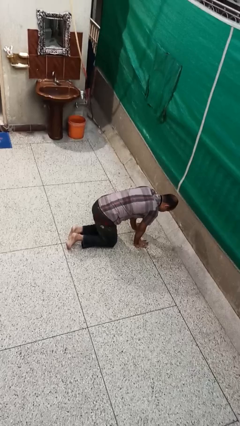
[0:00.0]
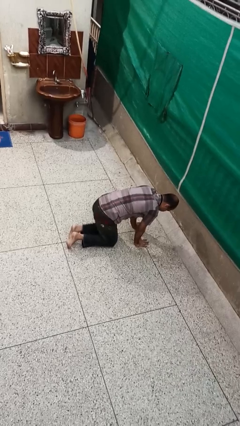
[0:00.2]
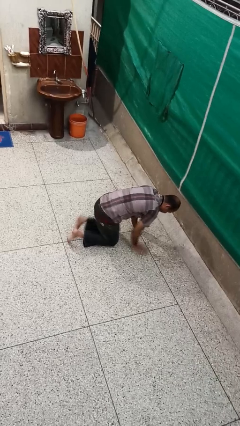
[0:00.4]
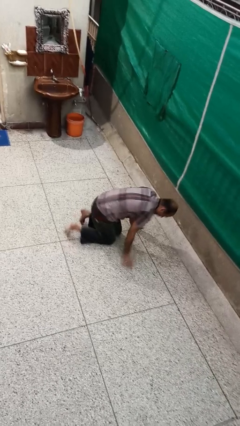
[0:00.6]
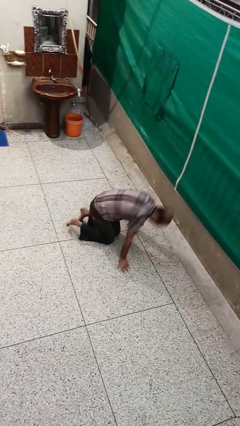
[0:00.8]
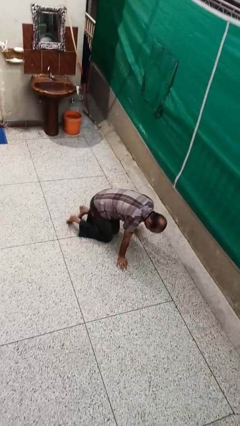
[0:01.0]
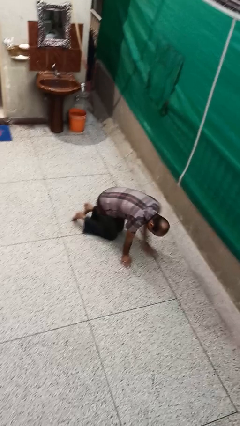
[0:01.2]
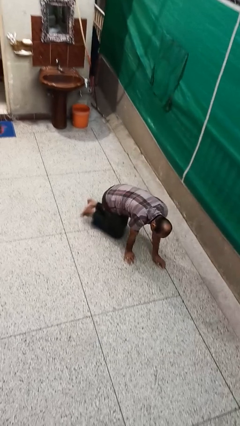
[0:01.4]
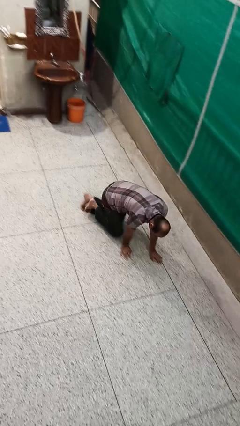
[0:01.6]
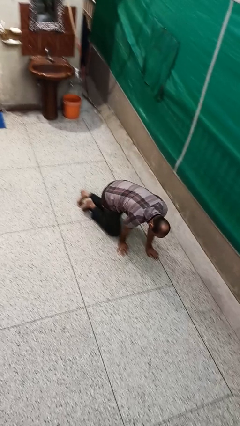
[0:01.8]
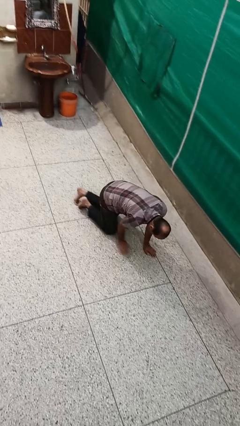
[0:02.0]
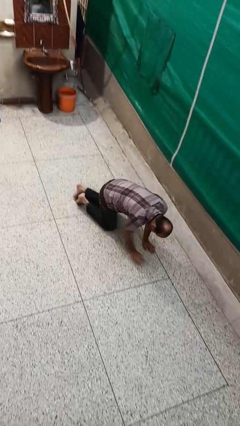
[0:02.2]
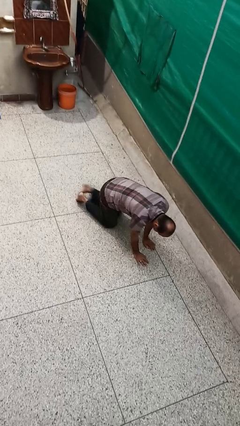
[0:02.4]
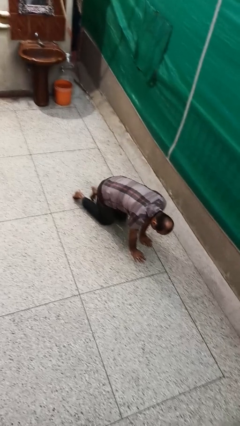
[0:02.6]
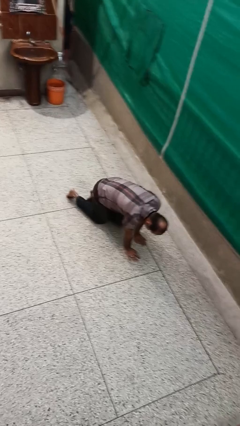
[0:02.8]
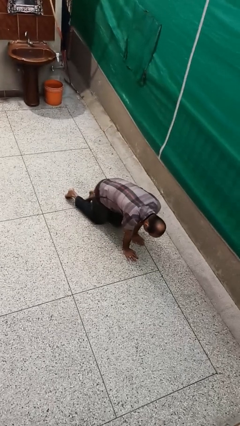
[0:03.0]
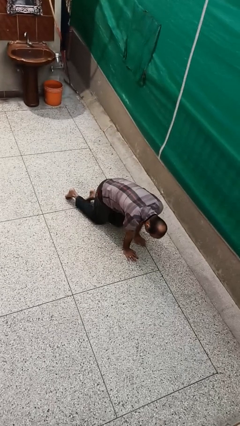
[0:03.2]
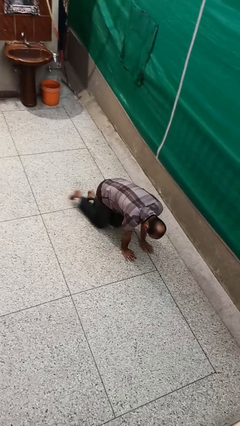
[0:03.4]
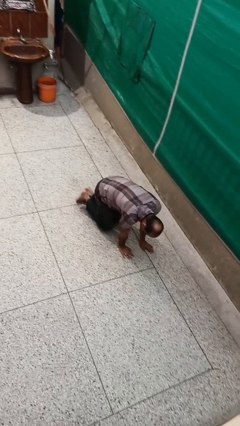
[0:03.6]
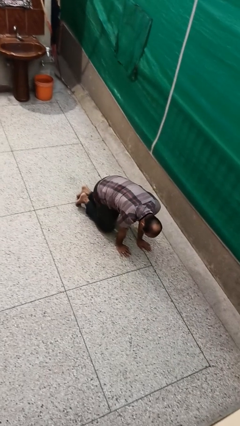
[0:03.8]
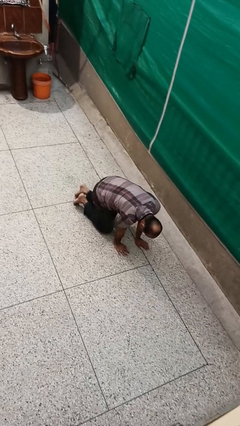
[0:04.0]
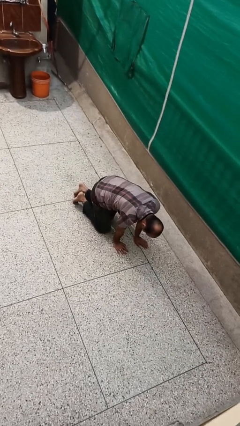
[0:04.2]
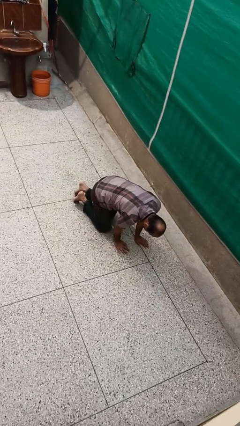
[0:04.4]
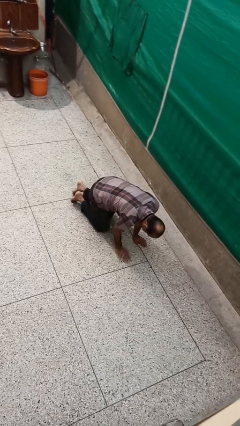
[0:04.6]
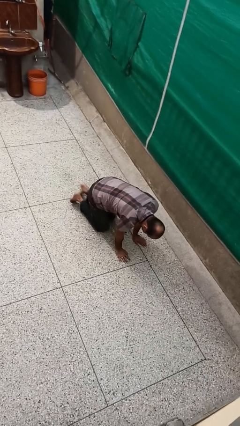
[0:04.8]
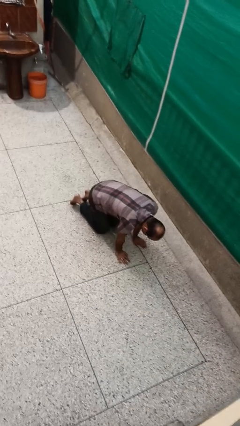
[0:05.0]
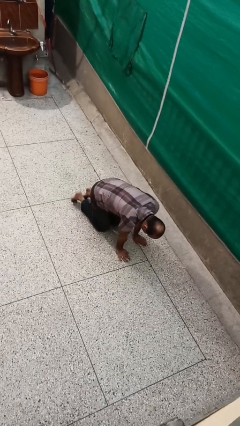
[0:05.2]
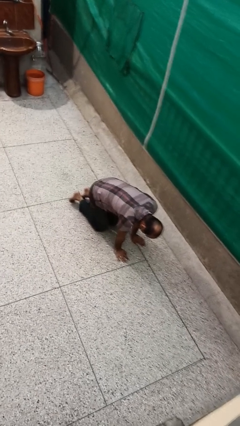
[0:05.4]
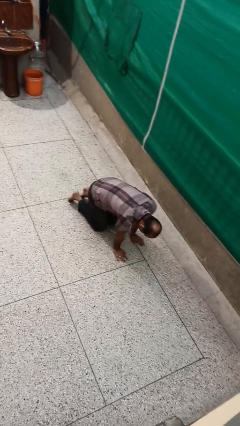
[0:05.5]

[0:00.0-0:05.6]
person crawls

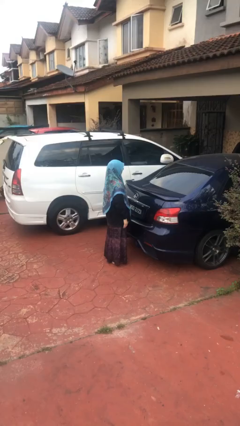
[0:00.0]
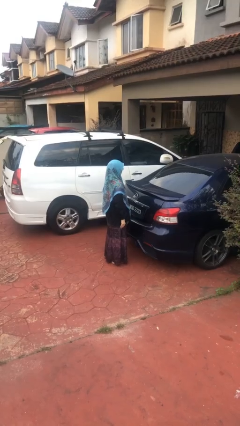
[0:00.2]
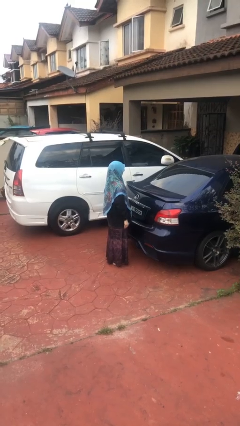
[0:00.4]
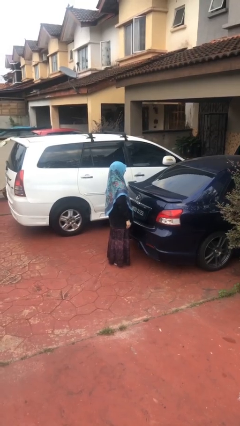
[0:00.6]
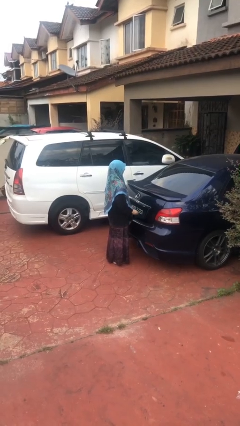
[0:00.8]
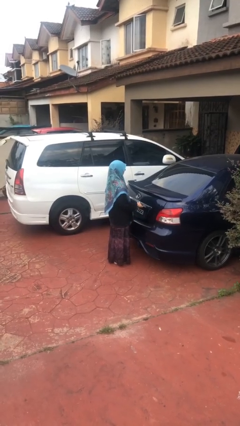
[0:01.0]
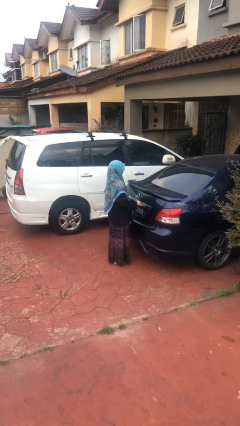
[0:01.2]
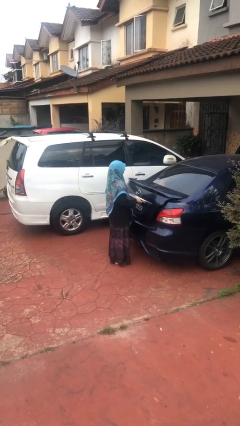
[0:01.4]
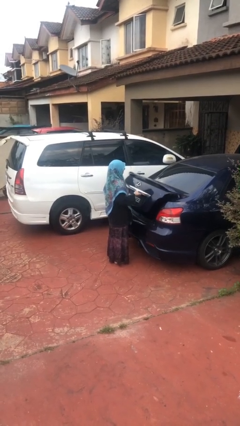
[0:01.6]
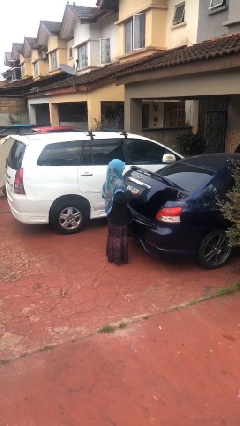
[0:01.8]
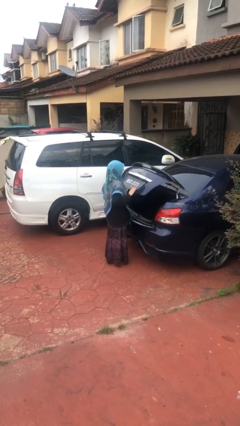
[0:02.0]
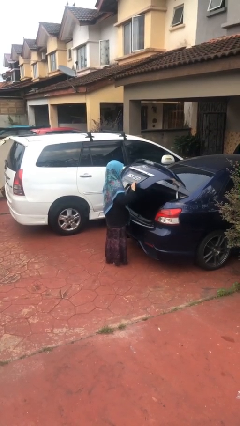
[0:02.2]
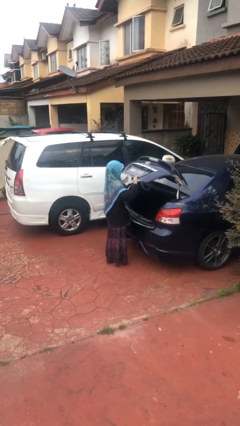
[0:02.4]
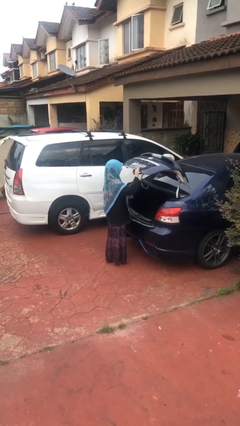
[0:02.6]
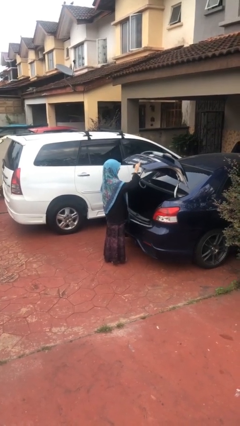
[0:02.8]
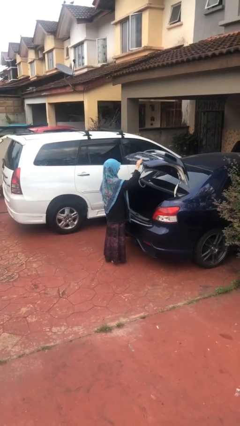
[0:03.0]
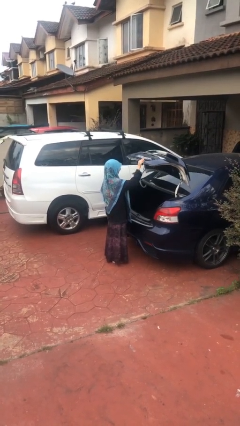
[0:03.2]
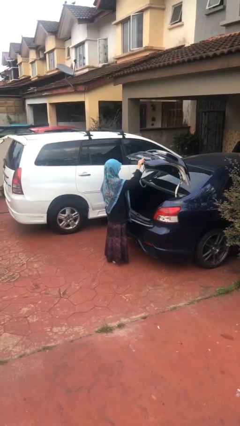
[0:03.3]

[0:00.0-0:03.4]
person opens car trunk

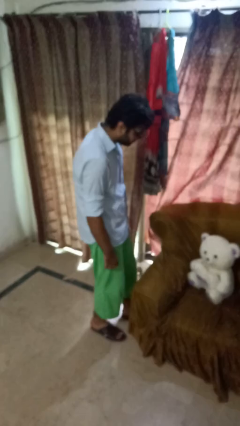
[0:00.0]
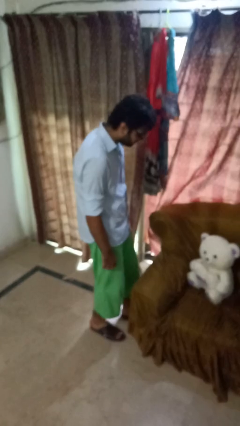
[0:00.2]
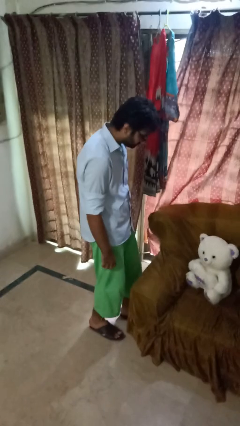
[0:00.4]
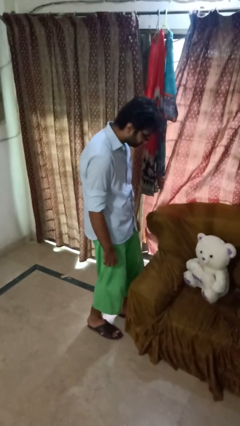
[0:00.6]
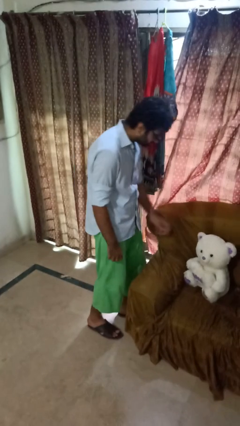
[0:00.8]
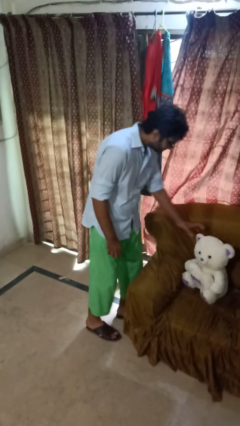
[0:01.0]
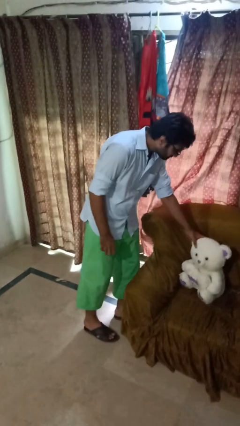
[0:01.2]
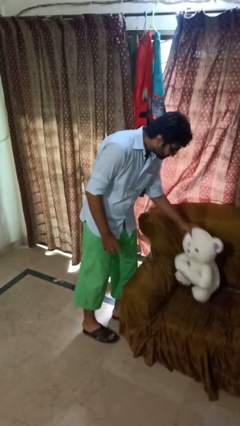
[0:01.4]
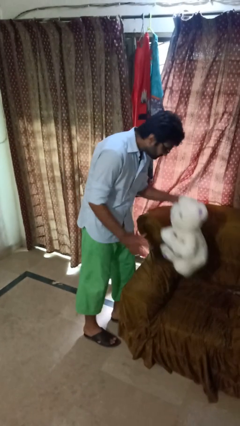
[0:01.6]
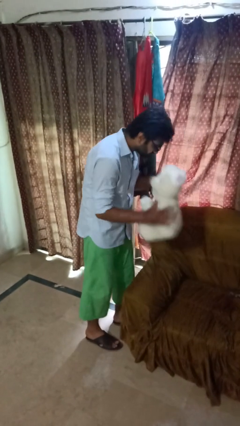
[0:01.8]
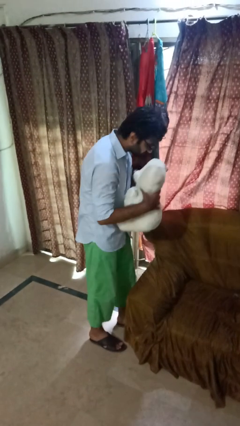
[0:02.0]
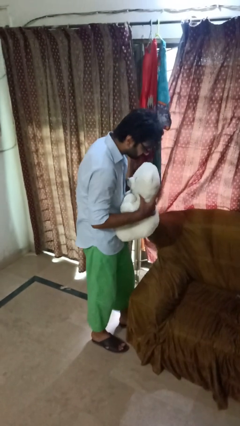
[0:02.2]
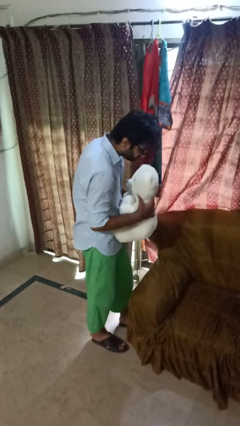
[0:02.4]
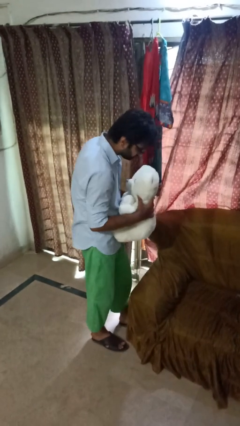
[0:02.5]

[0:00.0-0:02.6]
person picks up object from couch

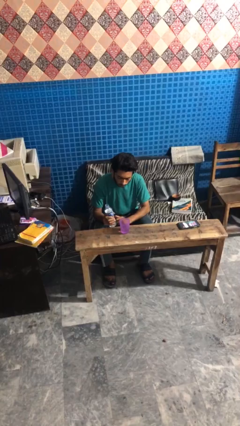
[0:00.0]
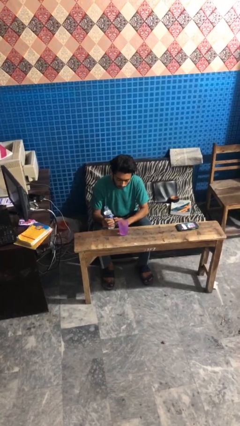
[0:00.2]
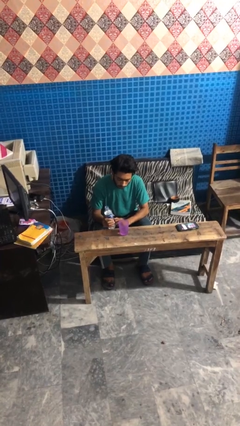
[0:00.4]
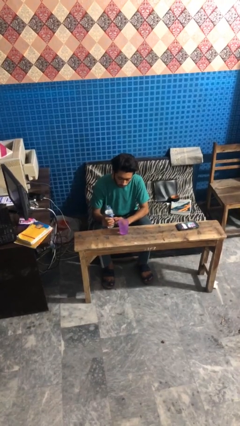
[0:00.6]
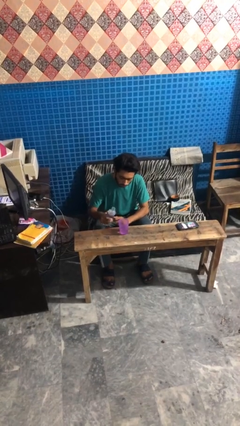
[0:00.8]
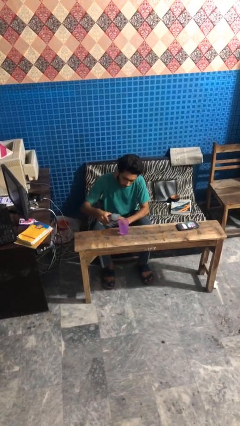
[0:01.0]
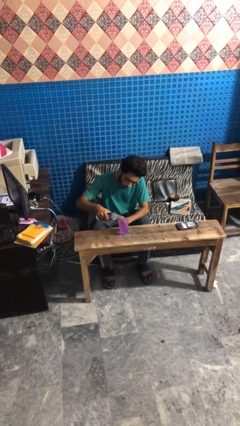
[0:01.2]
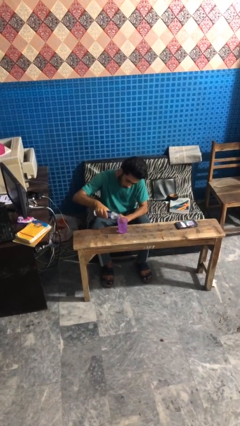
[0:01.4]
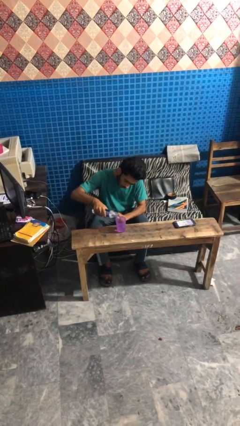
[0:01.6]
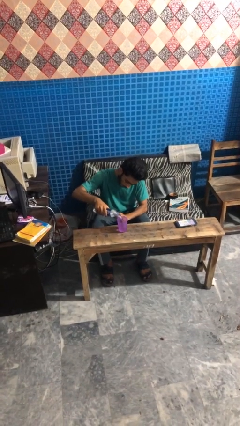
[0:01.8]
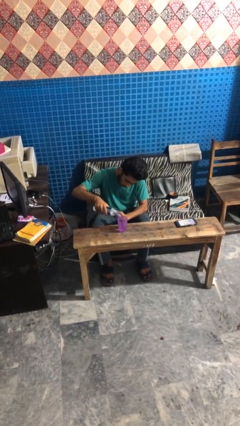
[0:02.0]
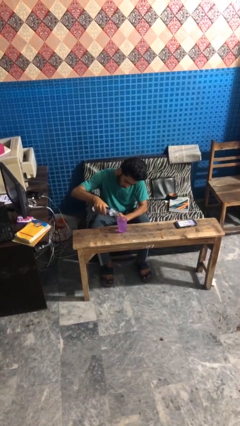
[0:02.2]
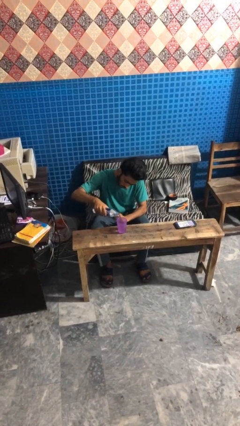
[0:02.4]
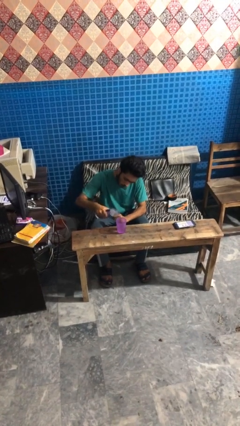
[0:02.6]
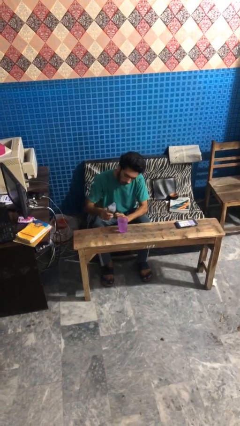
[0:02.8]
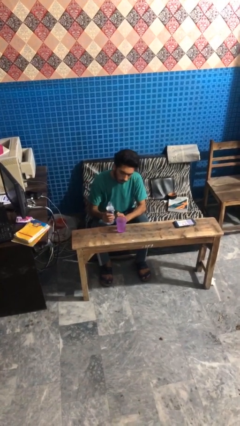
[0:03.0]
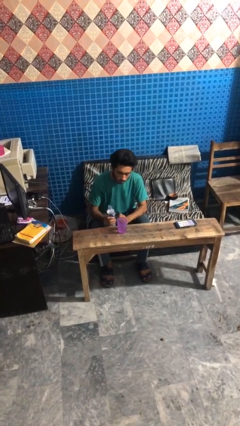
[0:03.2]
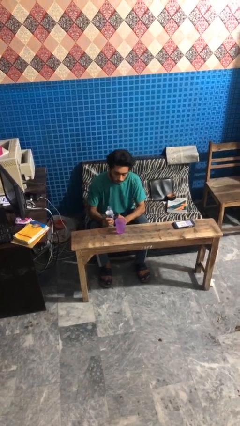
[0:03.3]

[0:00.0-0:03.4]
person pours liquid into cup

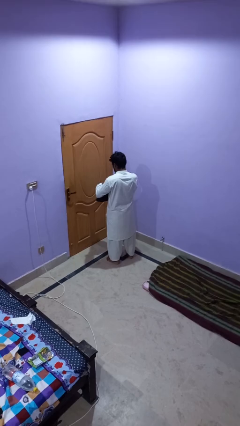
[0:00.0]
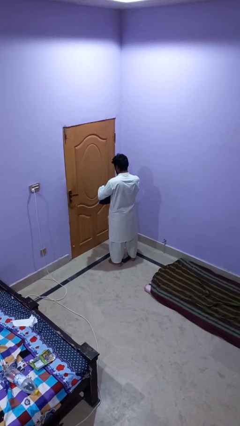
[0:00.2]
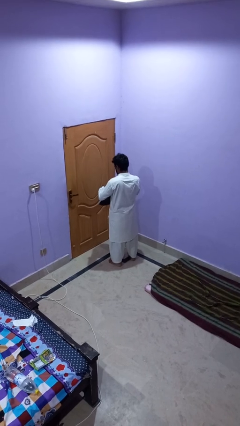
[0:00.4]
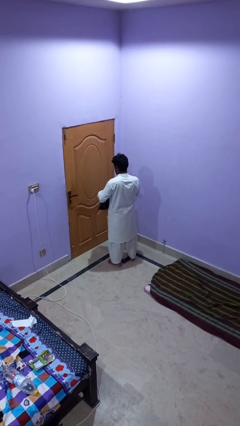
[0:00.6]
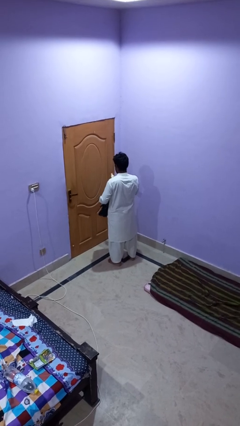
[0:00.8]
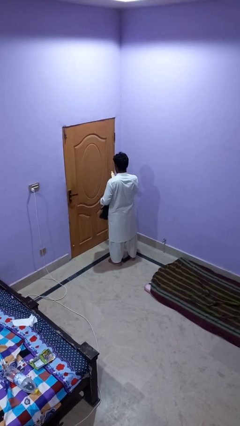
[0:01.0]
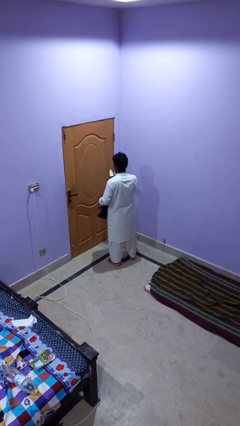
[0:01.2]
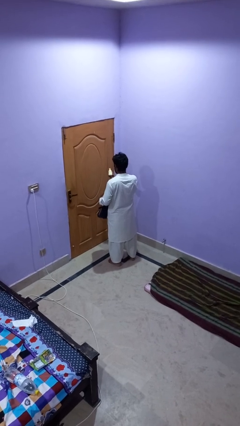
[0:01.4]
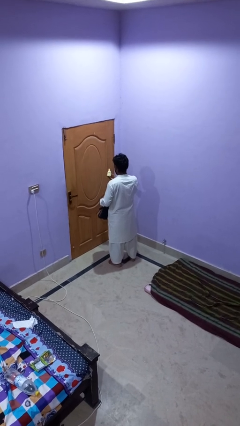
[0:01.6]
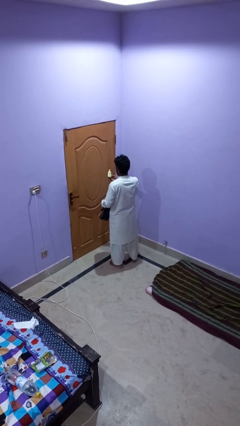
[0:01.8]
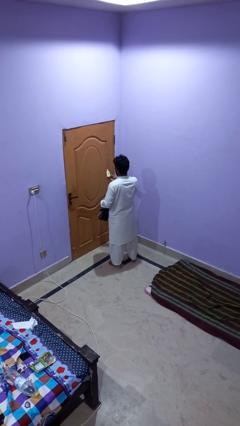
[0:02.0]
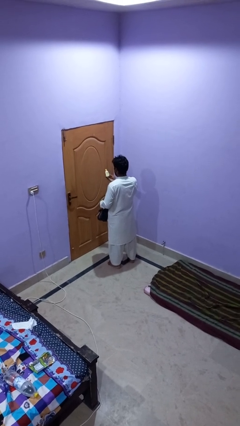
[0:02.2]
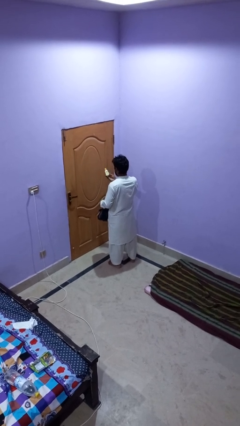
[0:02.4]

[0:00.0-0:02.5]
person takes object from purse

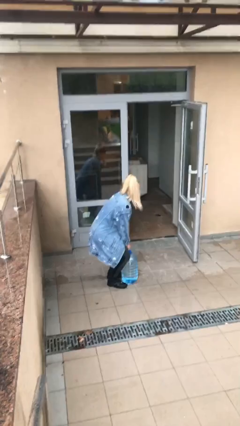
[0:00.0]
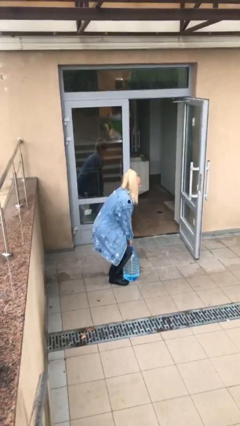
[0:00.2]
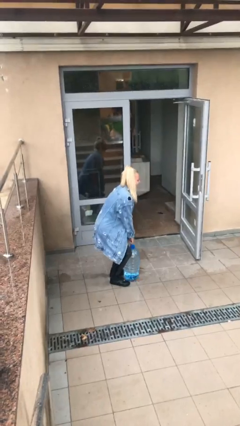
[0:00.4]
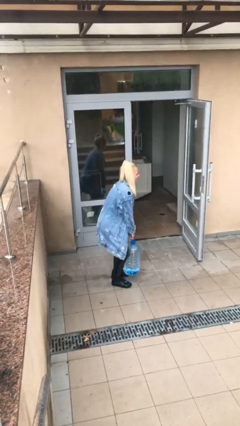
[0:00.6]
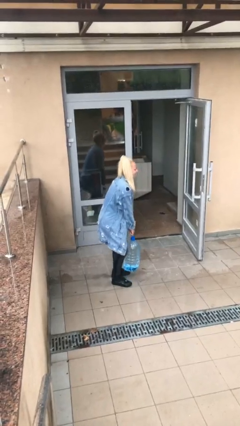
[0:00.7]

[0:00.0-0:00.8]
person picks up object from floor
